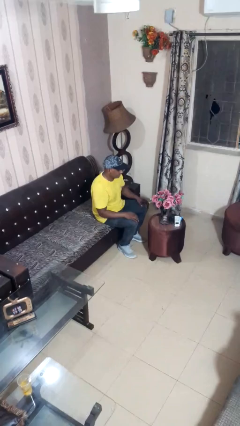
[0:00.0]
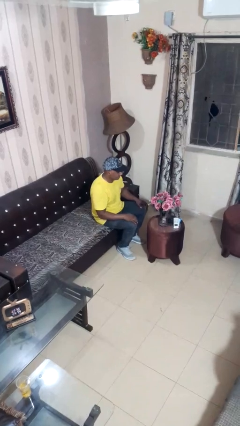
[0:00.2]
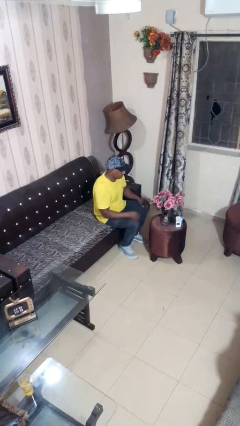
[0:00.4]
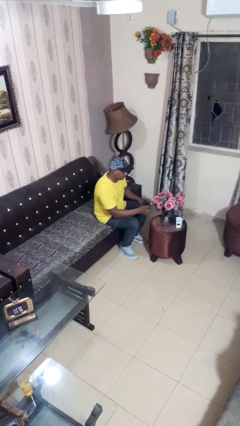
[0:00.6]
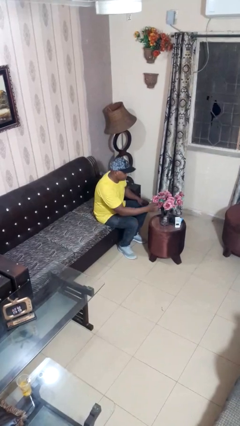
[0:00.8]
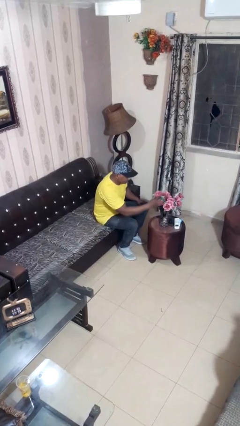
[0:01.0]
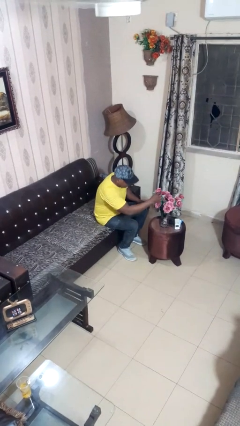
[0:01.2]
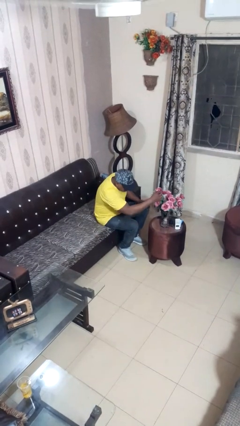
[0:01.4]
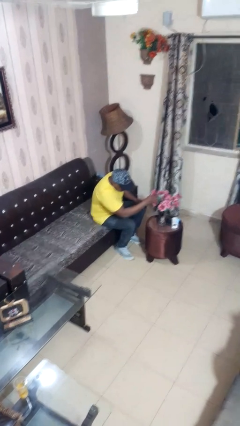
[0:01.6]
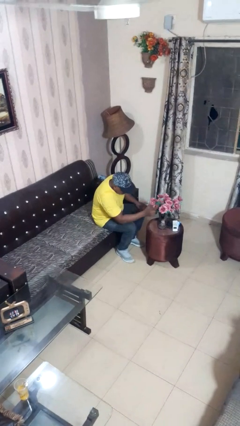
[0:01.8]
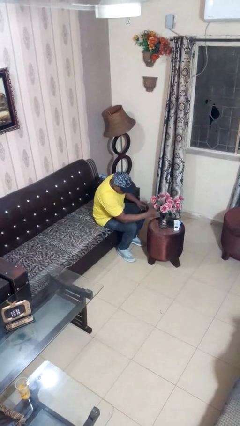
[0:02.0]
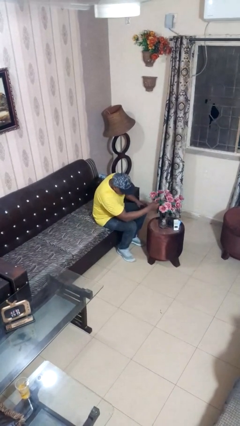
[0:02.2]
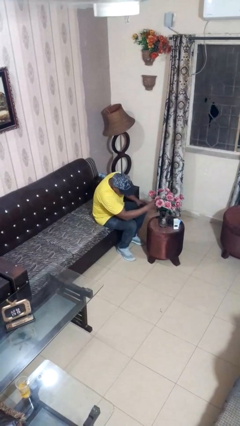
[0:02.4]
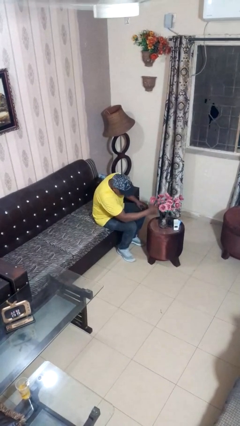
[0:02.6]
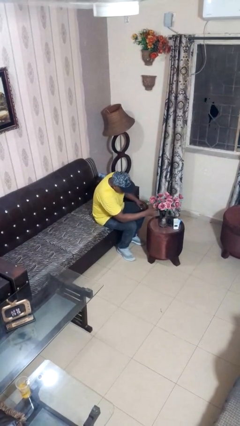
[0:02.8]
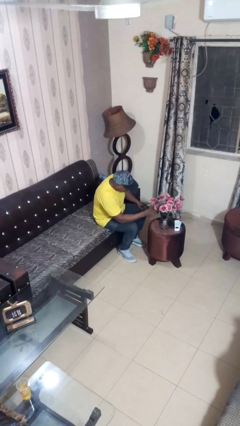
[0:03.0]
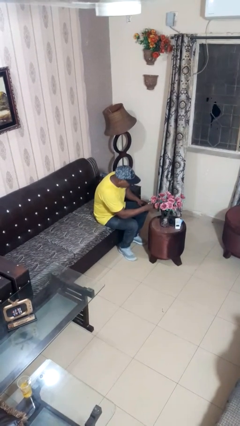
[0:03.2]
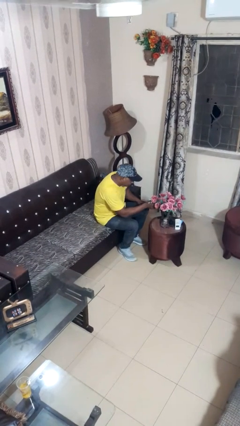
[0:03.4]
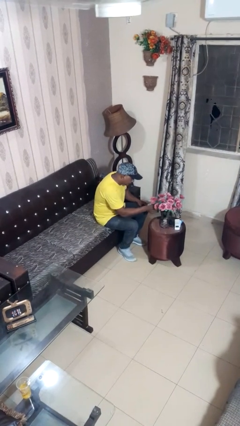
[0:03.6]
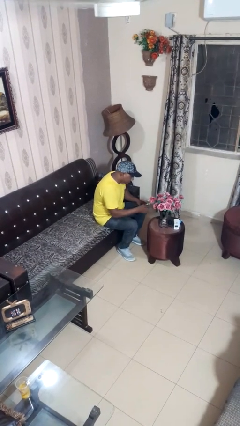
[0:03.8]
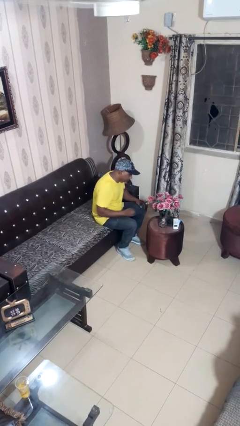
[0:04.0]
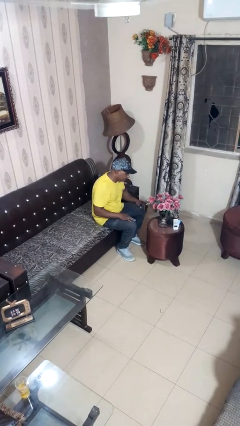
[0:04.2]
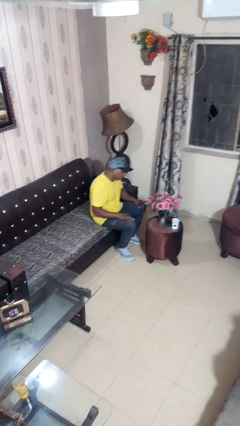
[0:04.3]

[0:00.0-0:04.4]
person arranges flowers in vase

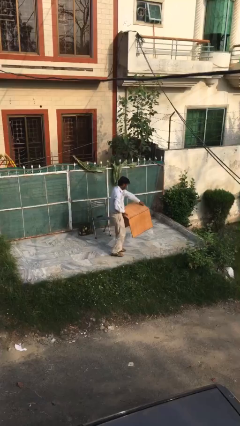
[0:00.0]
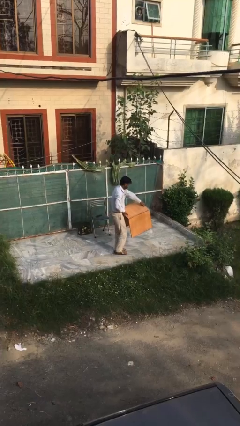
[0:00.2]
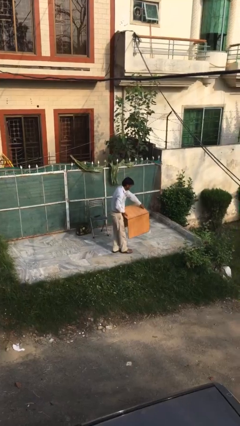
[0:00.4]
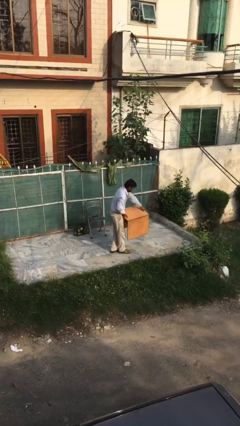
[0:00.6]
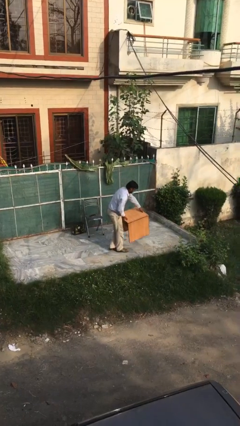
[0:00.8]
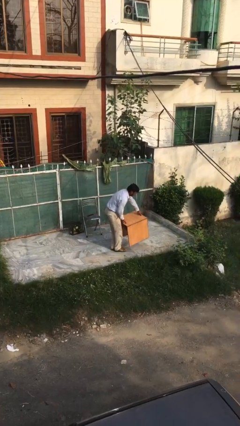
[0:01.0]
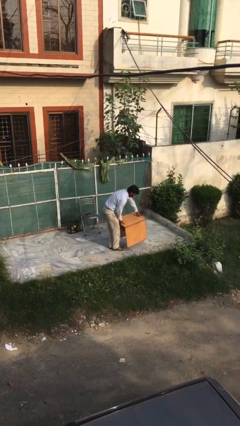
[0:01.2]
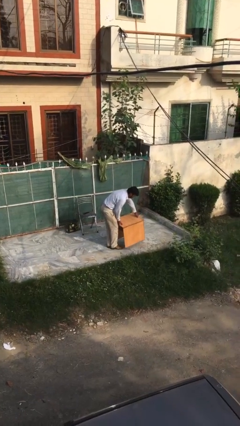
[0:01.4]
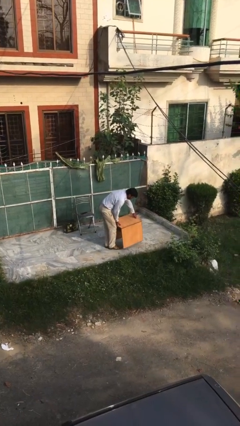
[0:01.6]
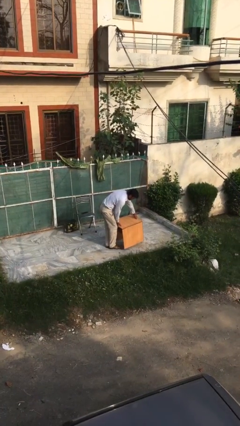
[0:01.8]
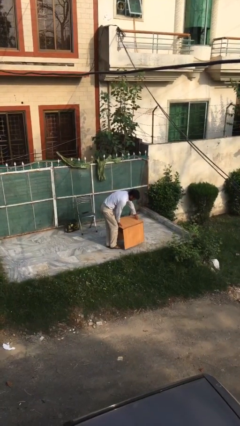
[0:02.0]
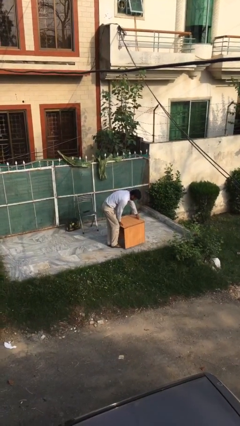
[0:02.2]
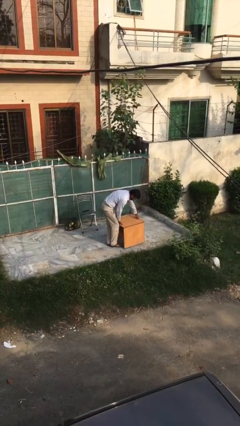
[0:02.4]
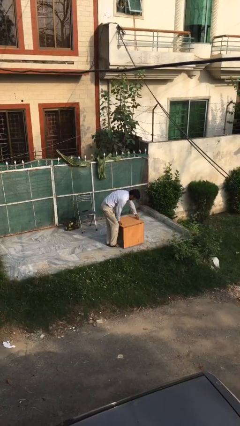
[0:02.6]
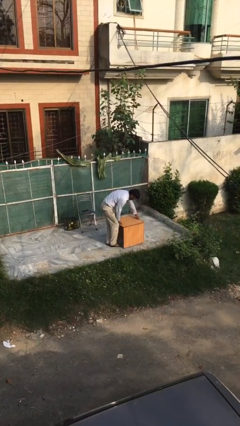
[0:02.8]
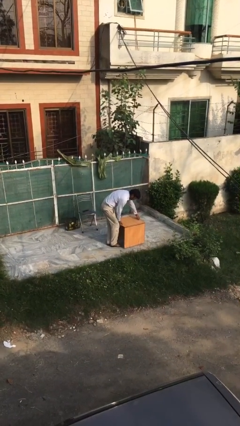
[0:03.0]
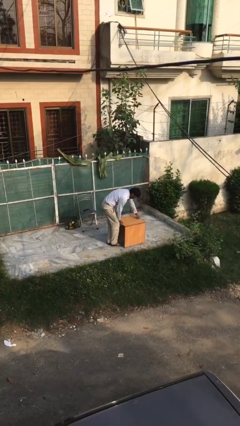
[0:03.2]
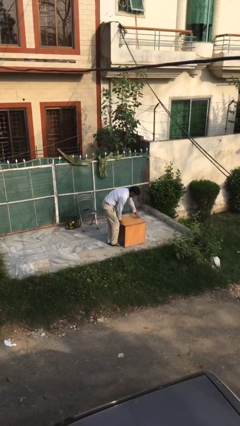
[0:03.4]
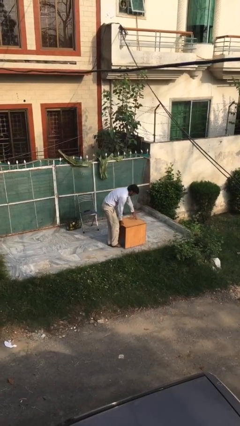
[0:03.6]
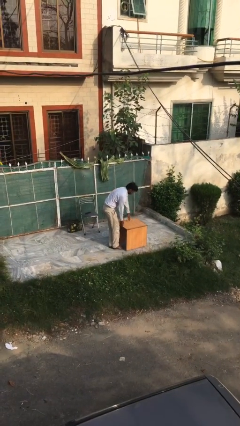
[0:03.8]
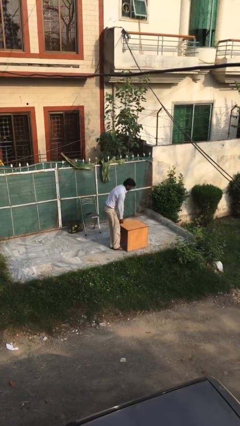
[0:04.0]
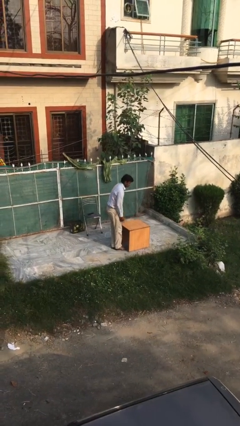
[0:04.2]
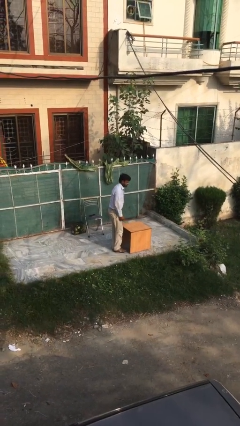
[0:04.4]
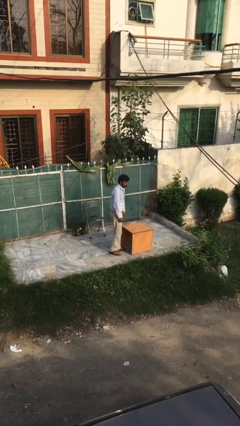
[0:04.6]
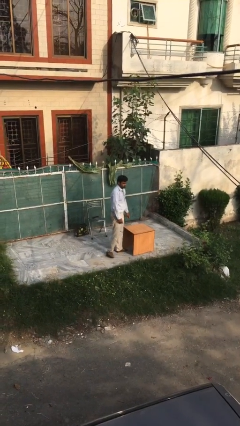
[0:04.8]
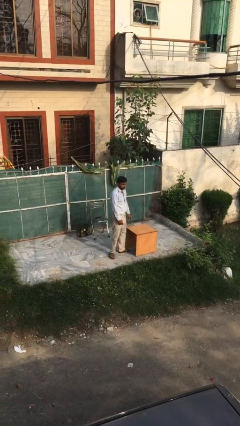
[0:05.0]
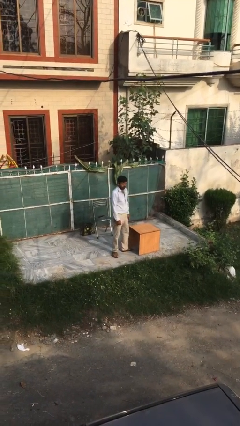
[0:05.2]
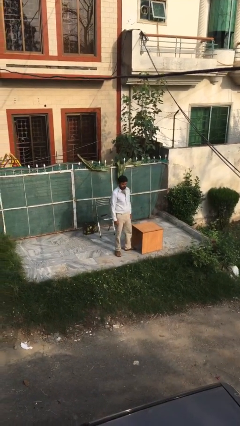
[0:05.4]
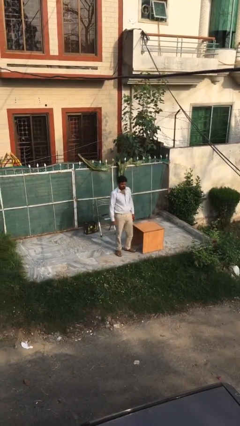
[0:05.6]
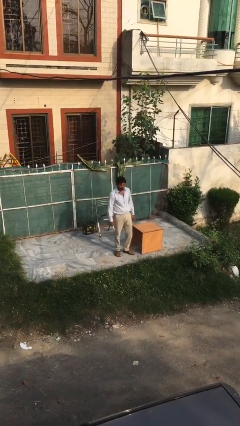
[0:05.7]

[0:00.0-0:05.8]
person puts down object on floor

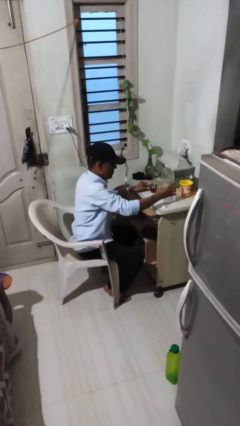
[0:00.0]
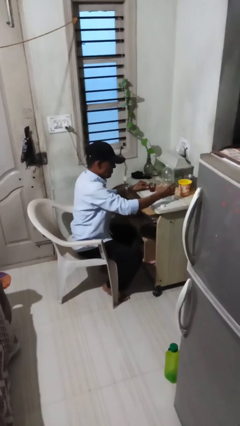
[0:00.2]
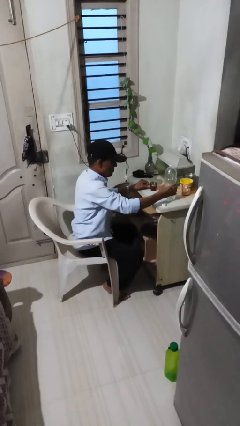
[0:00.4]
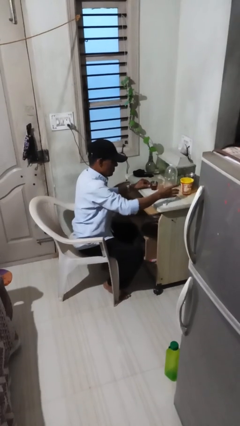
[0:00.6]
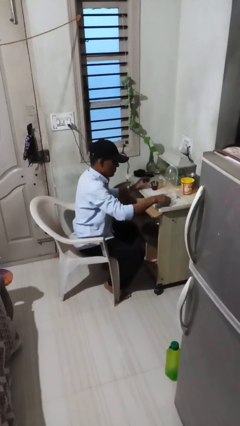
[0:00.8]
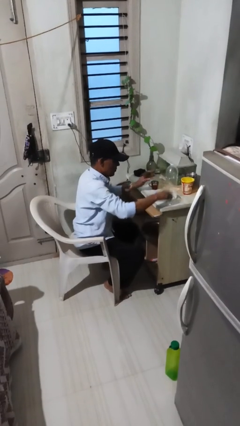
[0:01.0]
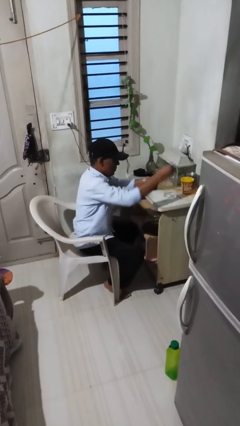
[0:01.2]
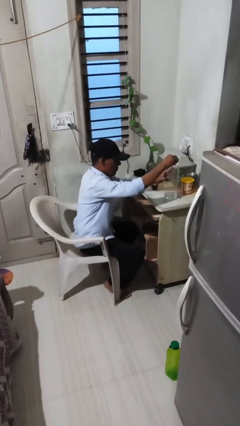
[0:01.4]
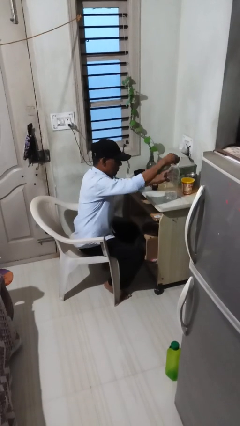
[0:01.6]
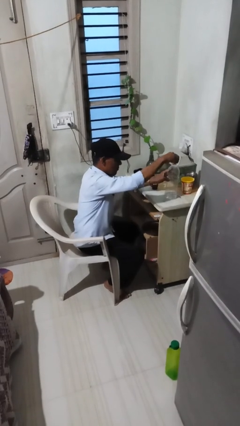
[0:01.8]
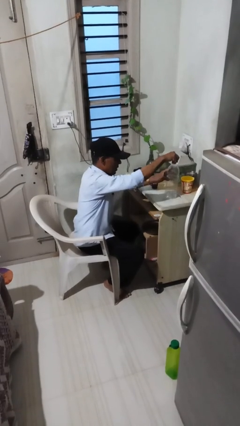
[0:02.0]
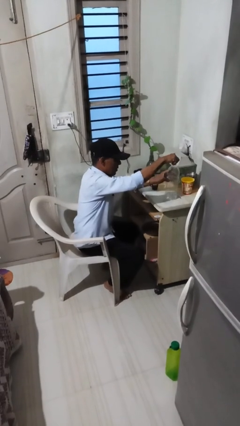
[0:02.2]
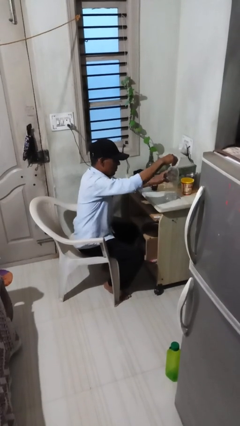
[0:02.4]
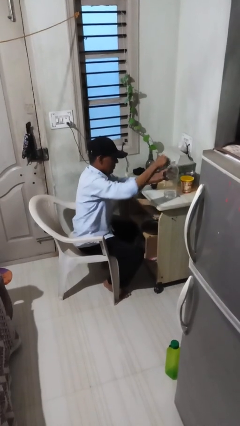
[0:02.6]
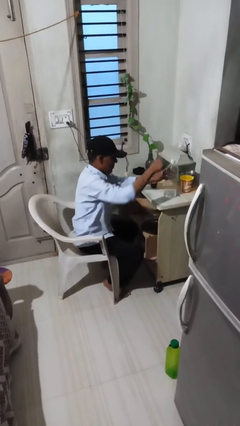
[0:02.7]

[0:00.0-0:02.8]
person screws lid to bottle

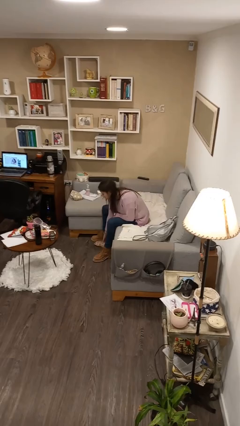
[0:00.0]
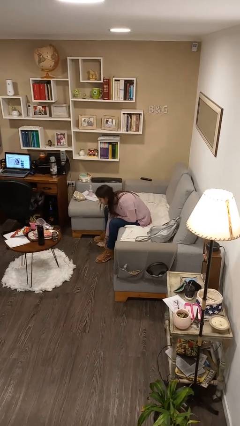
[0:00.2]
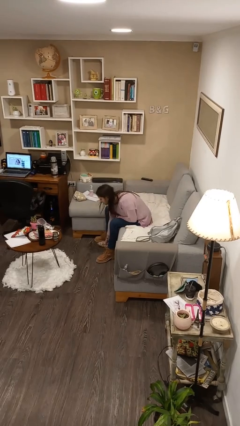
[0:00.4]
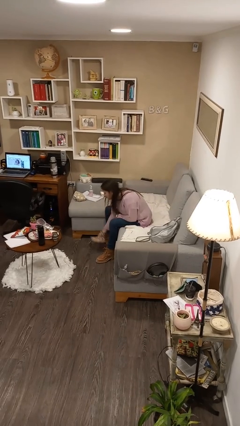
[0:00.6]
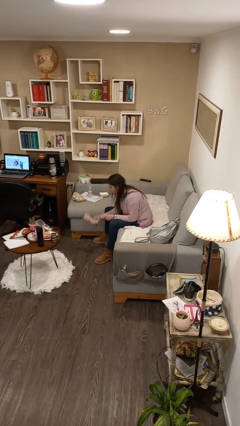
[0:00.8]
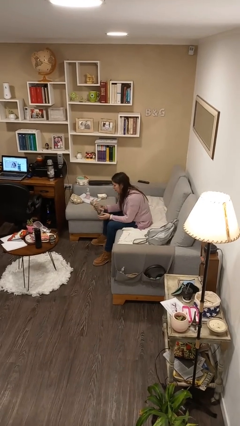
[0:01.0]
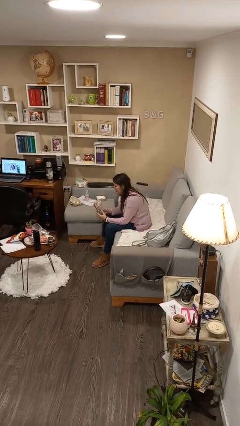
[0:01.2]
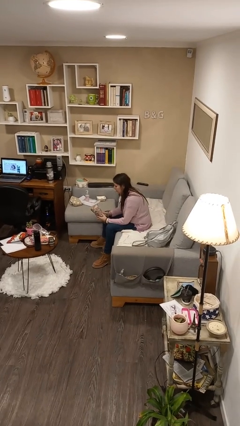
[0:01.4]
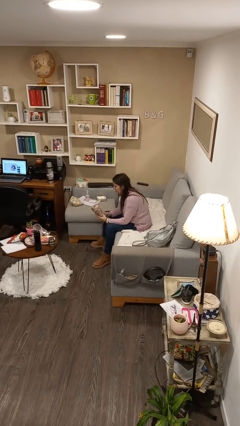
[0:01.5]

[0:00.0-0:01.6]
person picks up object from floor

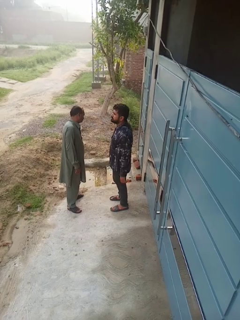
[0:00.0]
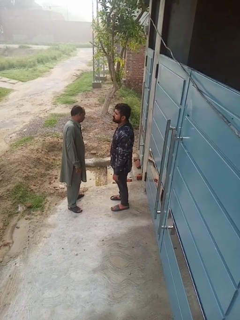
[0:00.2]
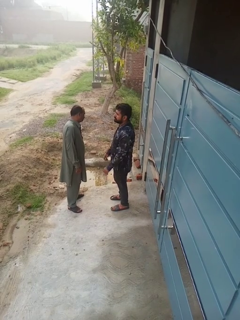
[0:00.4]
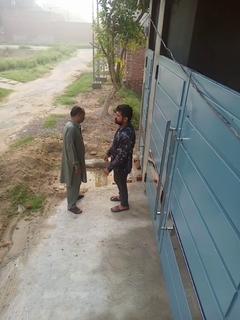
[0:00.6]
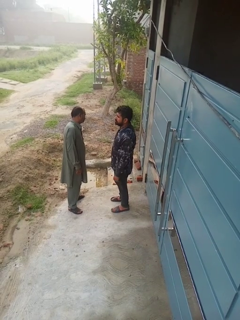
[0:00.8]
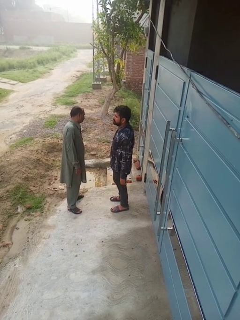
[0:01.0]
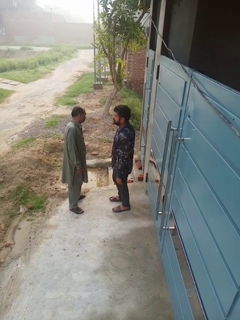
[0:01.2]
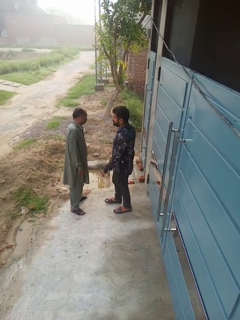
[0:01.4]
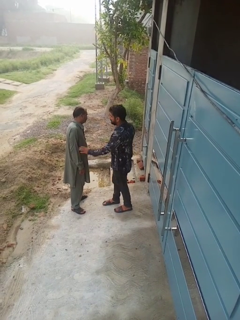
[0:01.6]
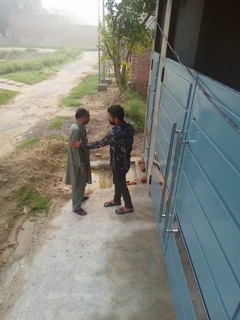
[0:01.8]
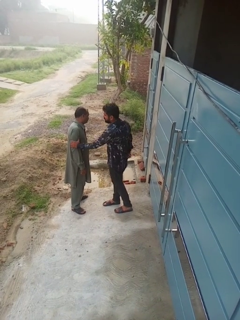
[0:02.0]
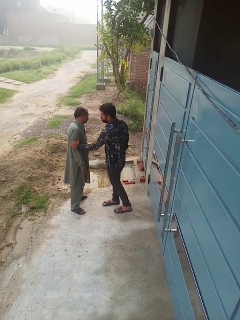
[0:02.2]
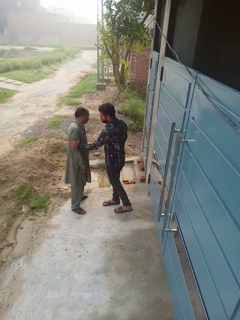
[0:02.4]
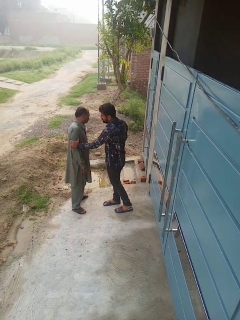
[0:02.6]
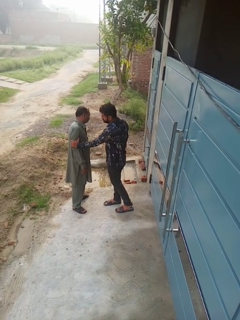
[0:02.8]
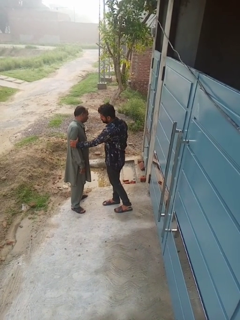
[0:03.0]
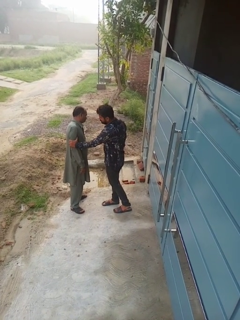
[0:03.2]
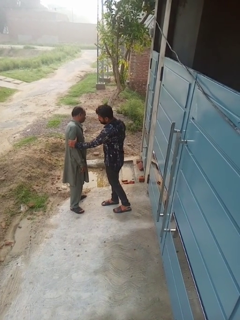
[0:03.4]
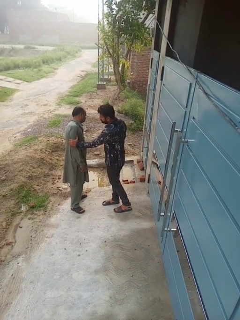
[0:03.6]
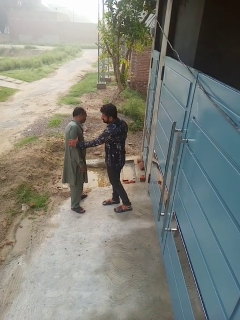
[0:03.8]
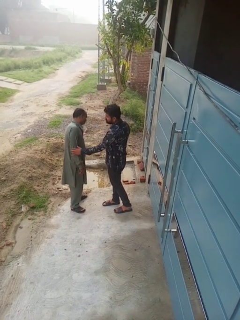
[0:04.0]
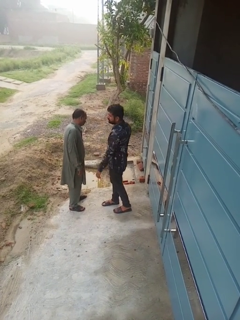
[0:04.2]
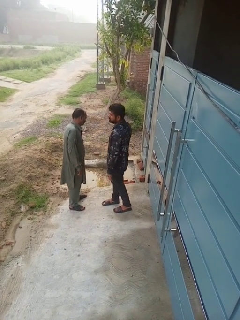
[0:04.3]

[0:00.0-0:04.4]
person grabs person by forearm
